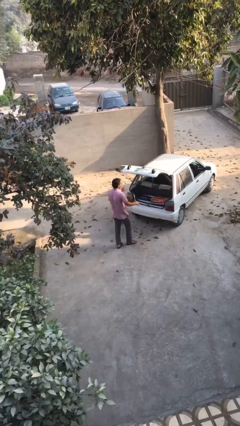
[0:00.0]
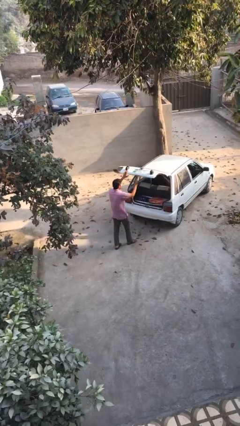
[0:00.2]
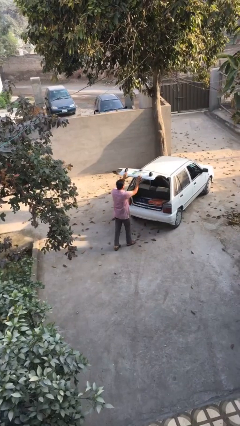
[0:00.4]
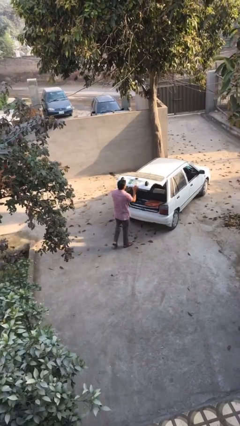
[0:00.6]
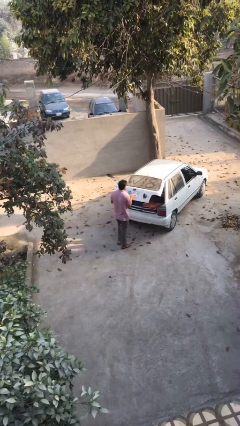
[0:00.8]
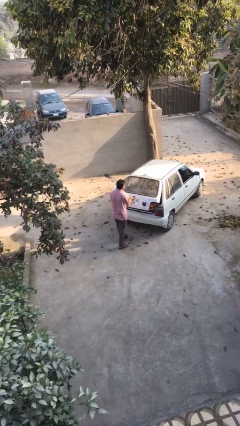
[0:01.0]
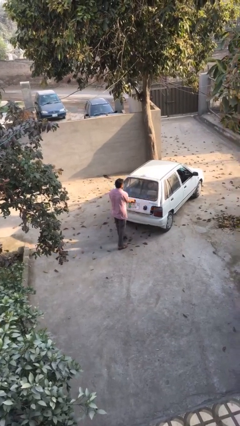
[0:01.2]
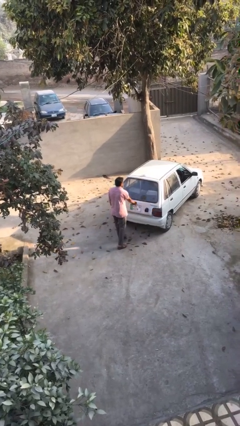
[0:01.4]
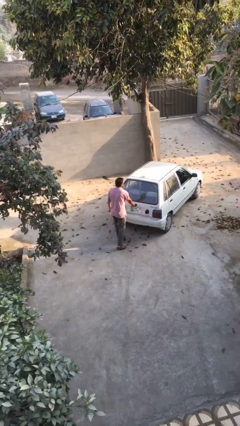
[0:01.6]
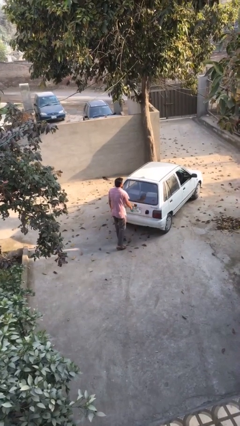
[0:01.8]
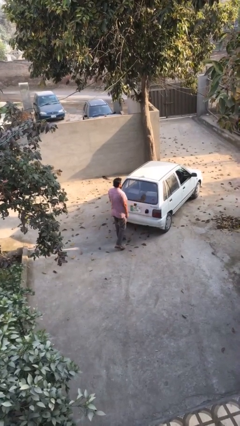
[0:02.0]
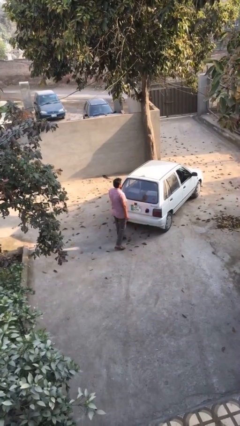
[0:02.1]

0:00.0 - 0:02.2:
person closes car trunk

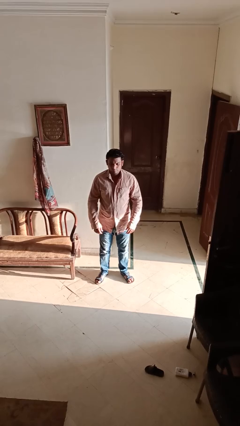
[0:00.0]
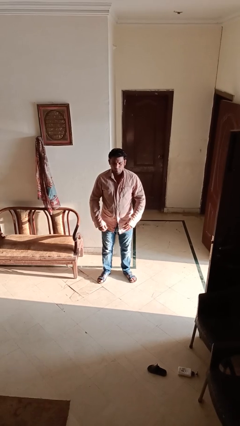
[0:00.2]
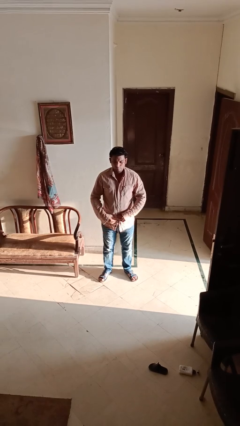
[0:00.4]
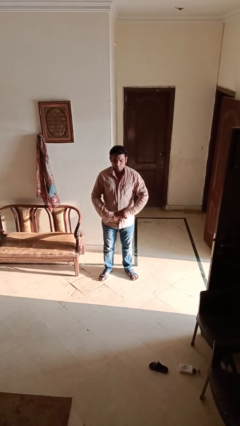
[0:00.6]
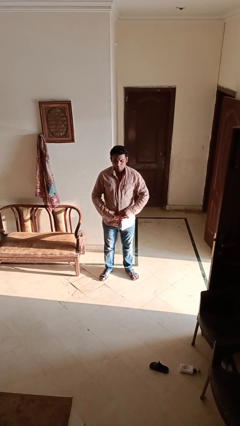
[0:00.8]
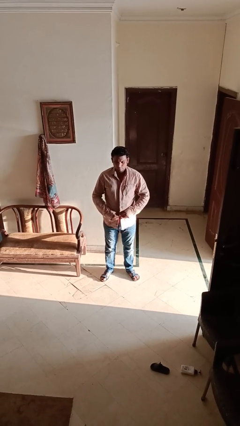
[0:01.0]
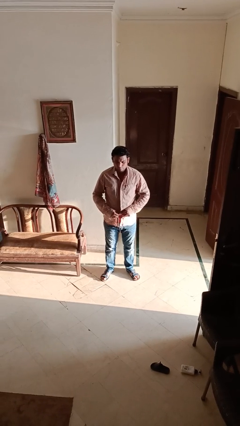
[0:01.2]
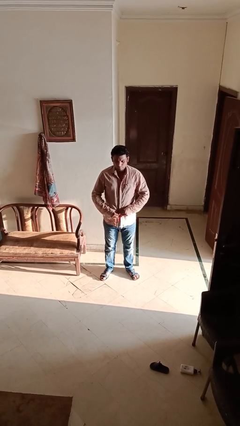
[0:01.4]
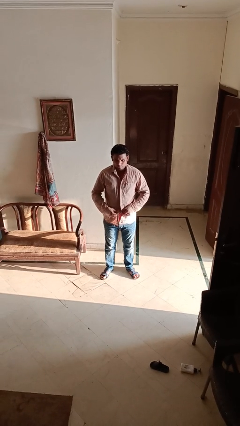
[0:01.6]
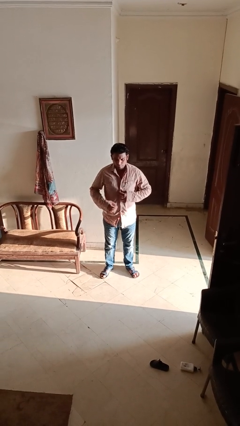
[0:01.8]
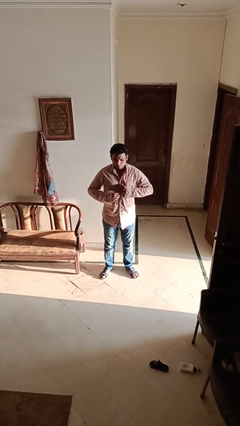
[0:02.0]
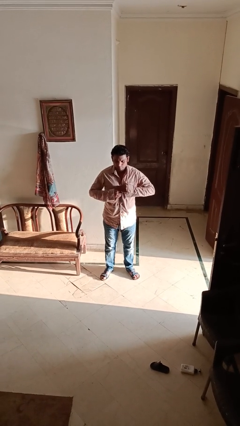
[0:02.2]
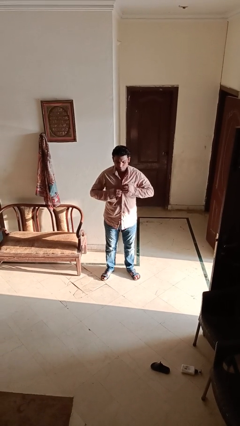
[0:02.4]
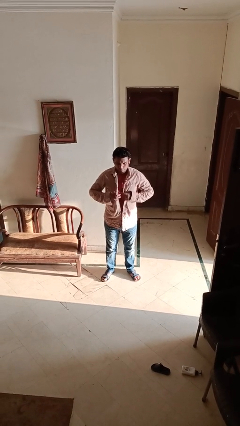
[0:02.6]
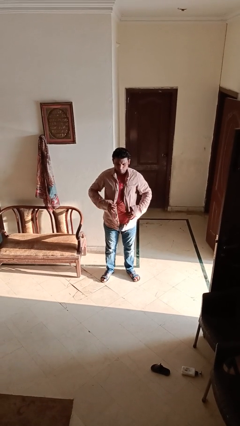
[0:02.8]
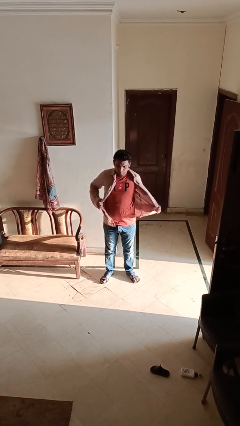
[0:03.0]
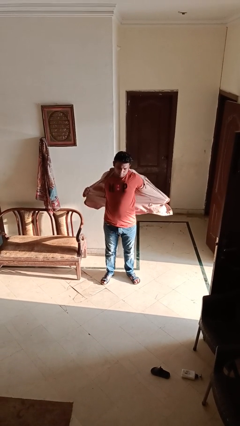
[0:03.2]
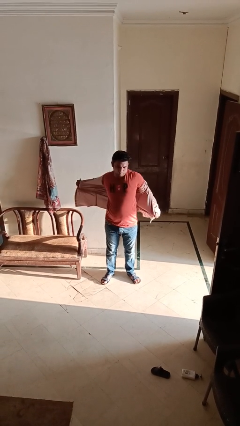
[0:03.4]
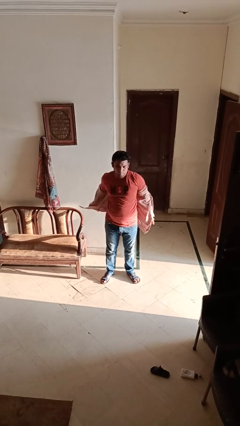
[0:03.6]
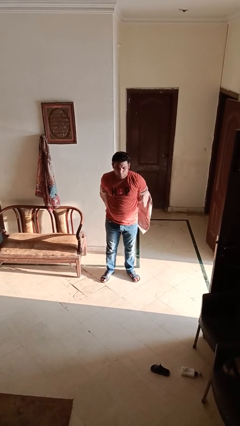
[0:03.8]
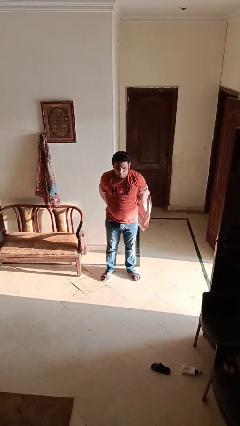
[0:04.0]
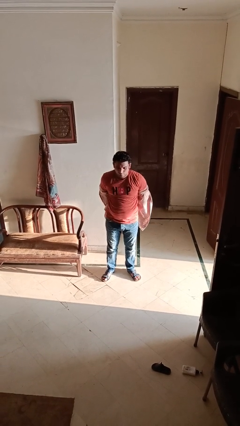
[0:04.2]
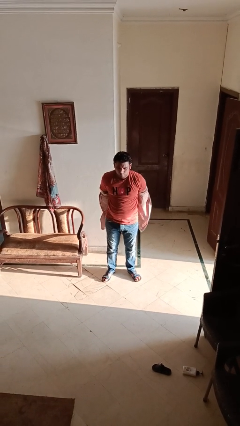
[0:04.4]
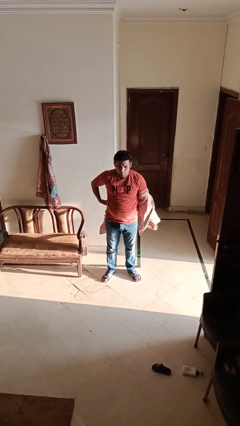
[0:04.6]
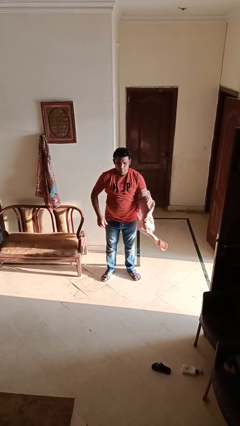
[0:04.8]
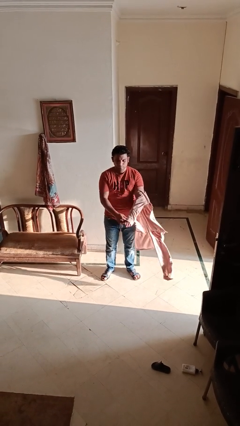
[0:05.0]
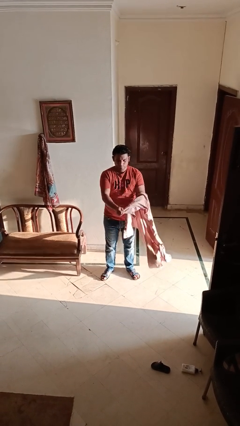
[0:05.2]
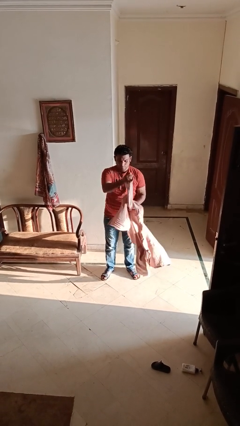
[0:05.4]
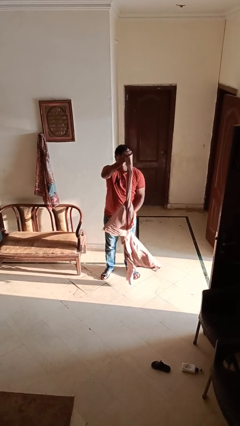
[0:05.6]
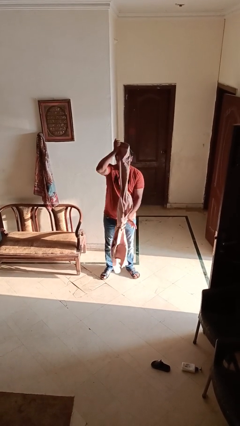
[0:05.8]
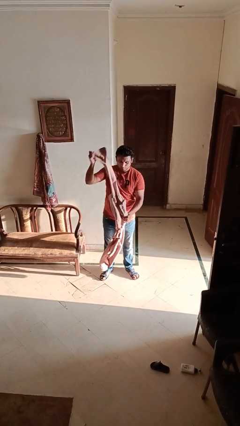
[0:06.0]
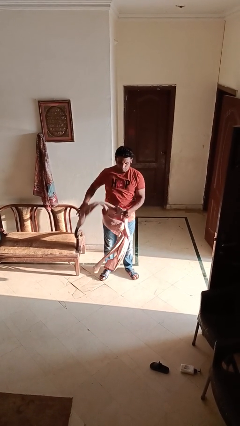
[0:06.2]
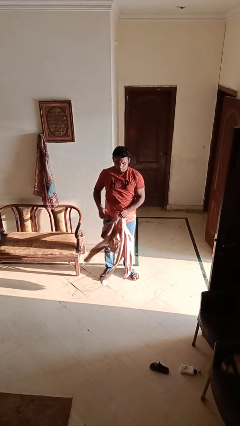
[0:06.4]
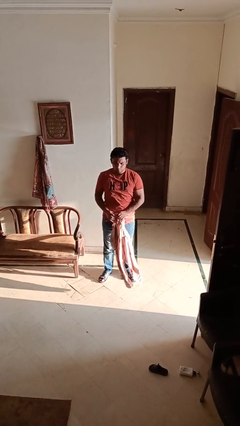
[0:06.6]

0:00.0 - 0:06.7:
person takes off shirt

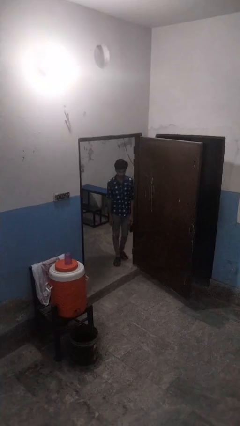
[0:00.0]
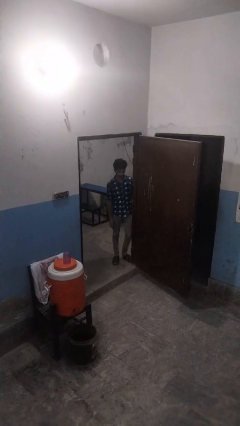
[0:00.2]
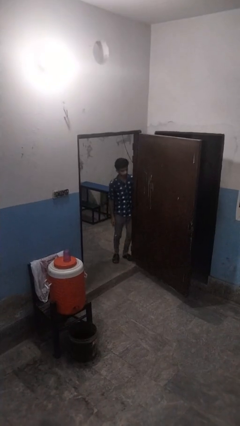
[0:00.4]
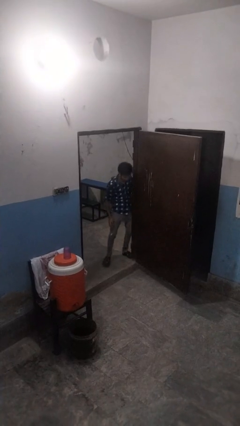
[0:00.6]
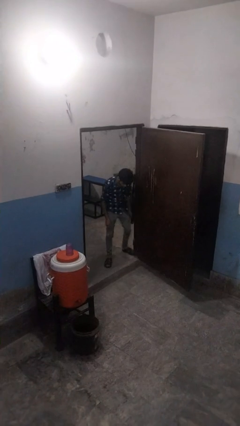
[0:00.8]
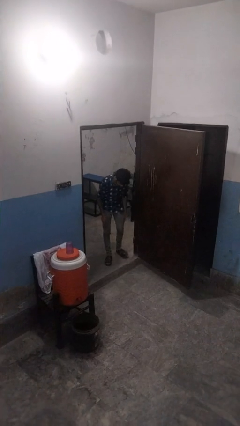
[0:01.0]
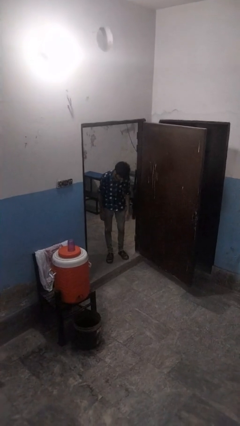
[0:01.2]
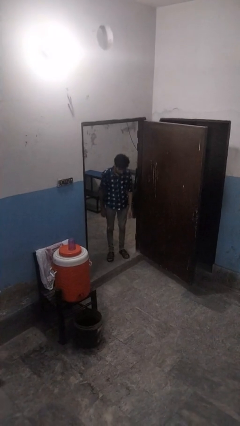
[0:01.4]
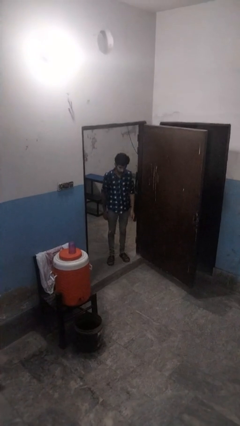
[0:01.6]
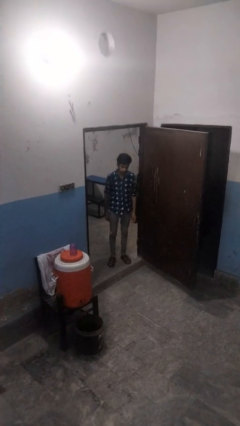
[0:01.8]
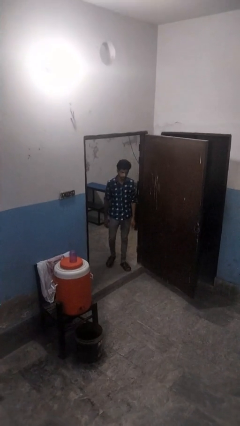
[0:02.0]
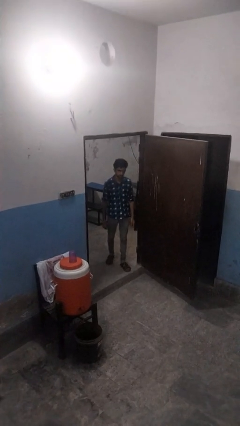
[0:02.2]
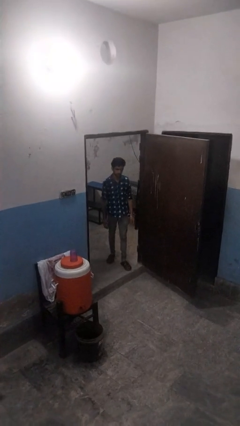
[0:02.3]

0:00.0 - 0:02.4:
person bumps into wall

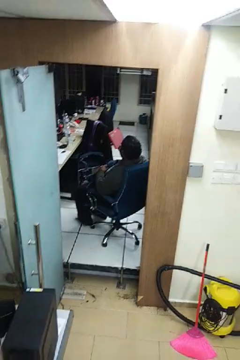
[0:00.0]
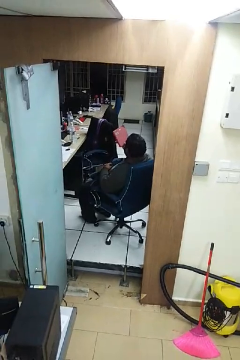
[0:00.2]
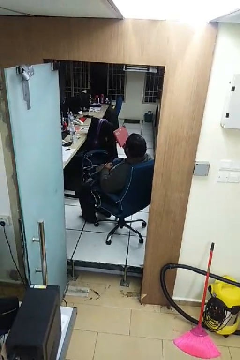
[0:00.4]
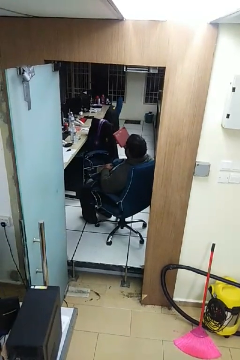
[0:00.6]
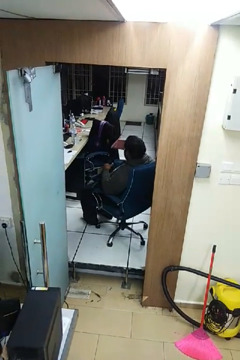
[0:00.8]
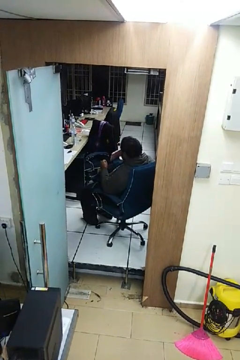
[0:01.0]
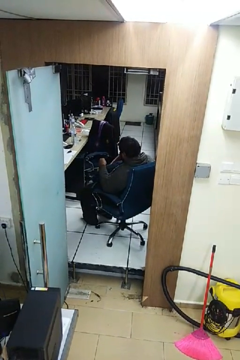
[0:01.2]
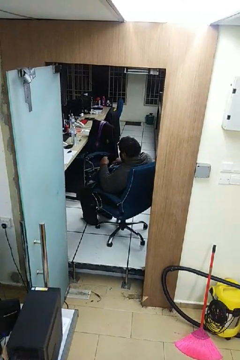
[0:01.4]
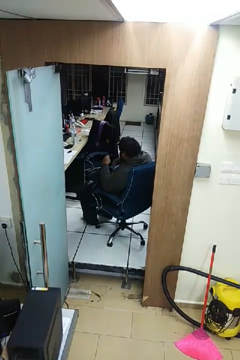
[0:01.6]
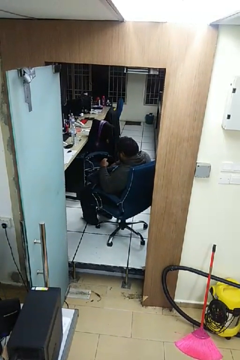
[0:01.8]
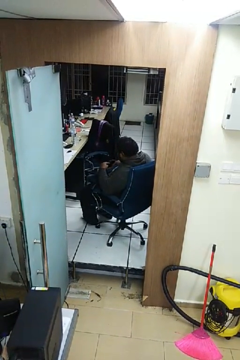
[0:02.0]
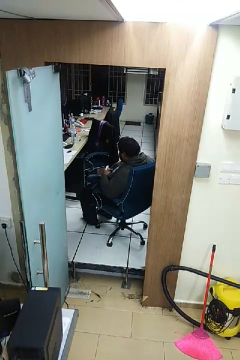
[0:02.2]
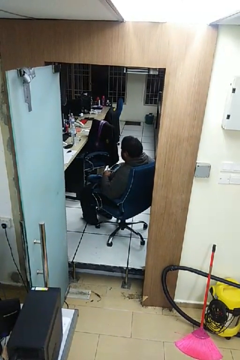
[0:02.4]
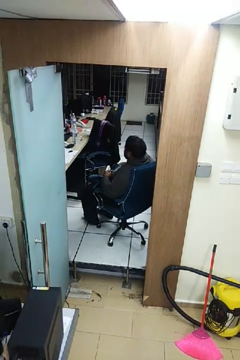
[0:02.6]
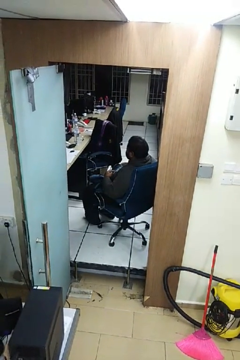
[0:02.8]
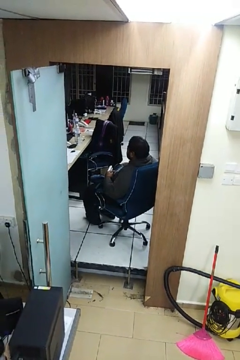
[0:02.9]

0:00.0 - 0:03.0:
person puts object into backpack

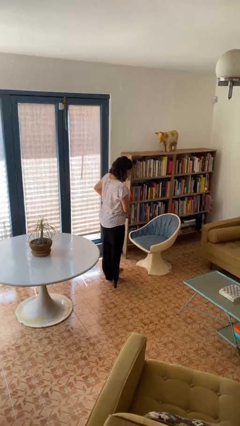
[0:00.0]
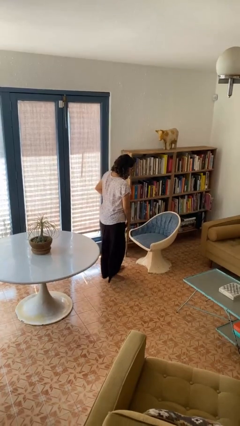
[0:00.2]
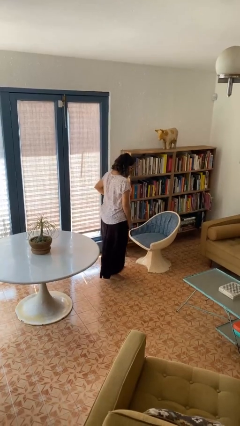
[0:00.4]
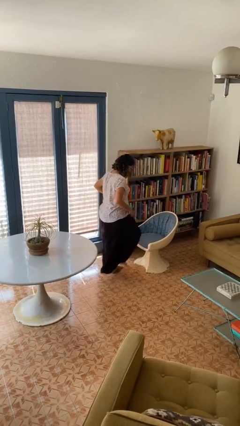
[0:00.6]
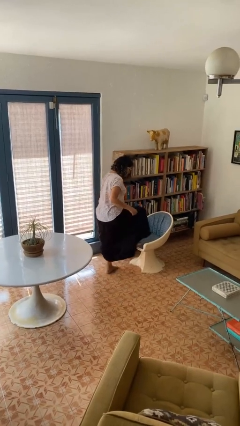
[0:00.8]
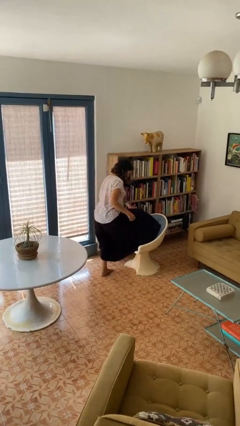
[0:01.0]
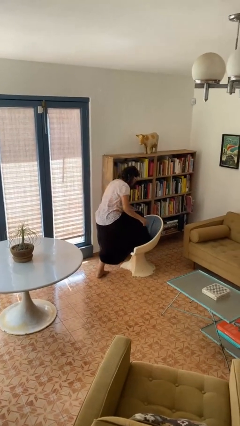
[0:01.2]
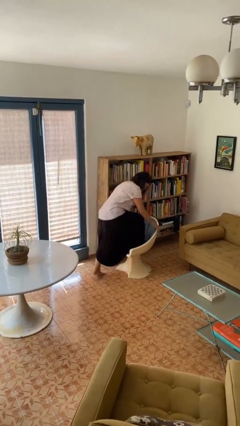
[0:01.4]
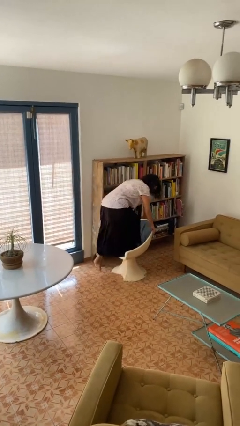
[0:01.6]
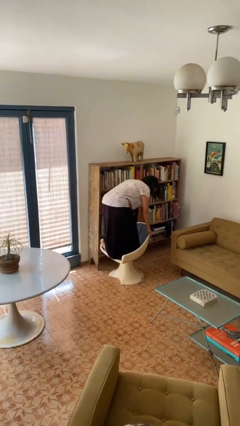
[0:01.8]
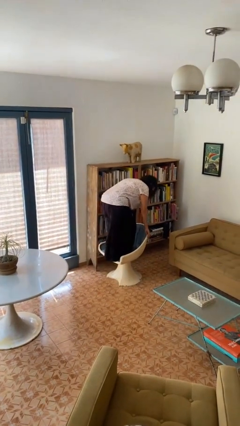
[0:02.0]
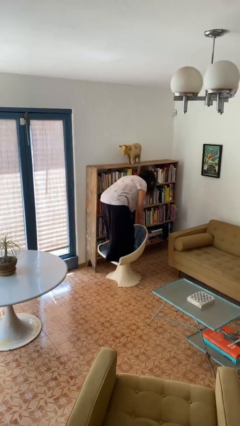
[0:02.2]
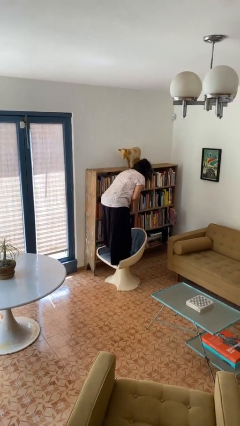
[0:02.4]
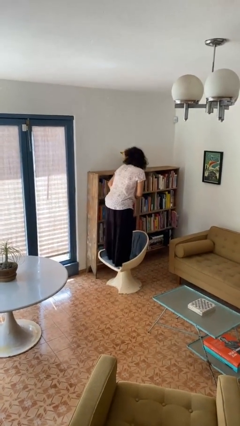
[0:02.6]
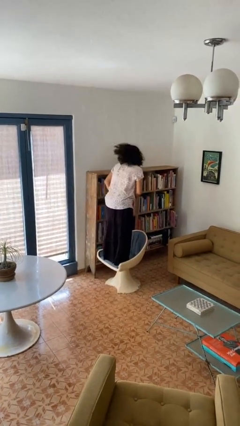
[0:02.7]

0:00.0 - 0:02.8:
person climbs on chair

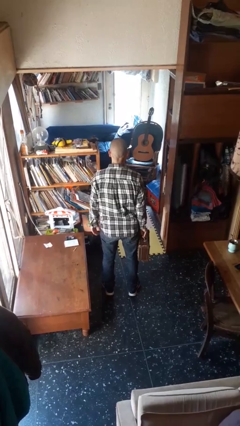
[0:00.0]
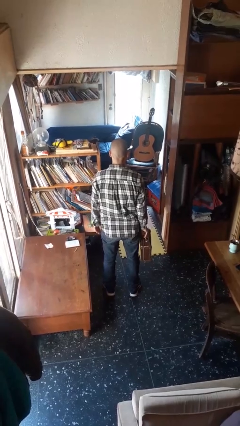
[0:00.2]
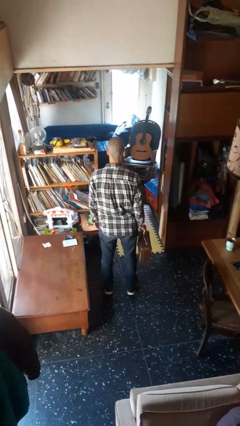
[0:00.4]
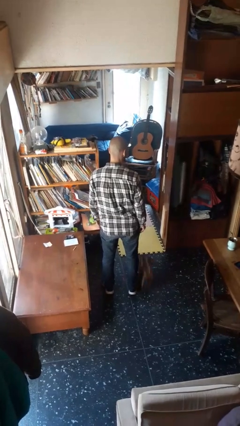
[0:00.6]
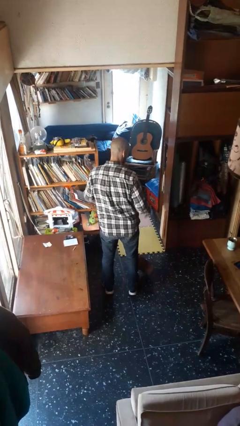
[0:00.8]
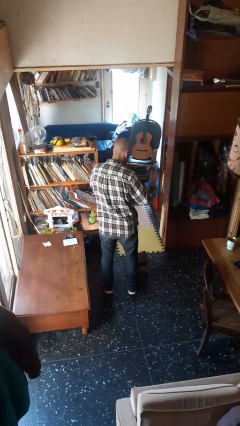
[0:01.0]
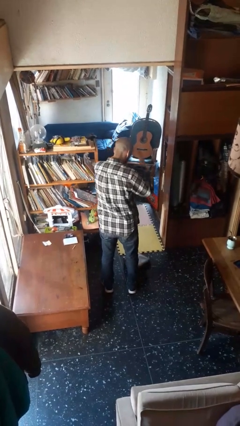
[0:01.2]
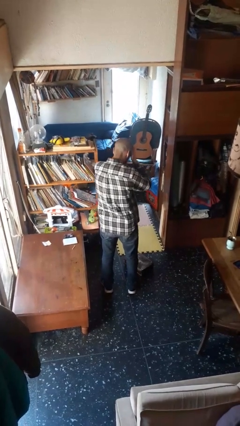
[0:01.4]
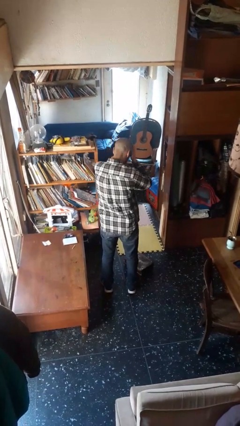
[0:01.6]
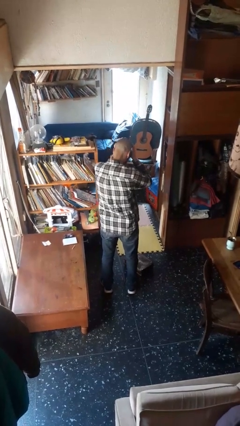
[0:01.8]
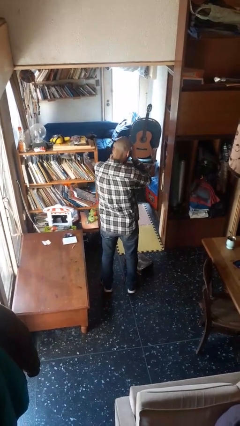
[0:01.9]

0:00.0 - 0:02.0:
person drops object